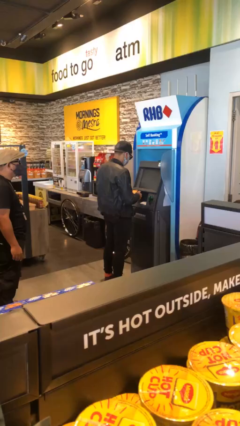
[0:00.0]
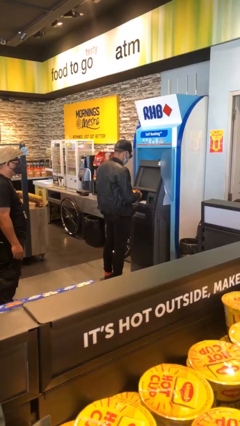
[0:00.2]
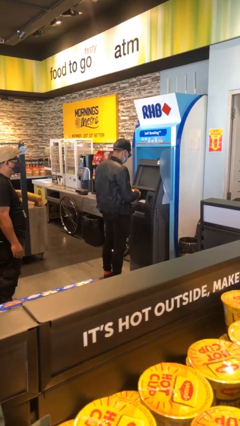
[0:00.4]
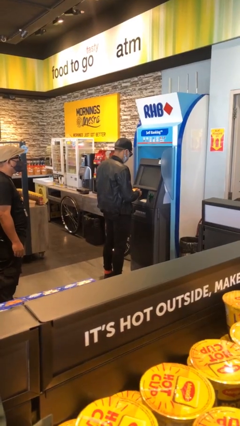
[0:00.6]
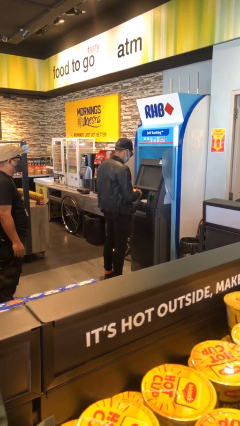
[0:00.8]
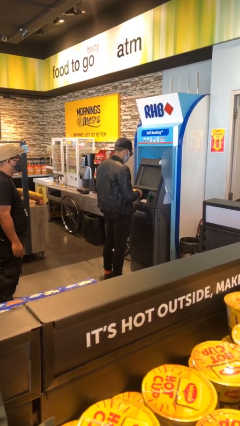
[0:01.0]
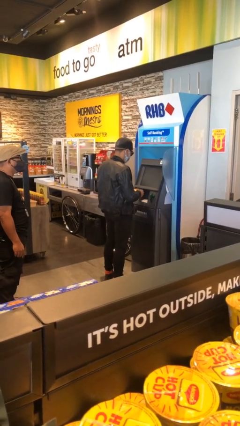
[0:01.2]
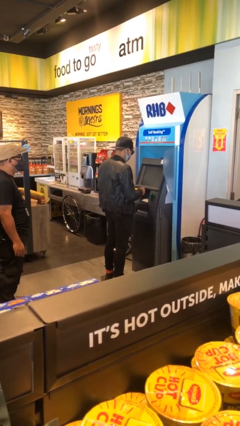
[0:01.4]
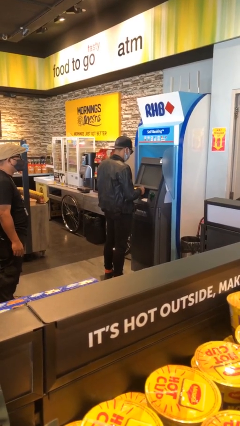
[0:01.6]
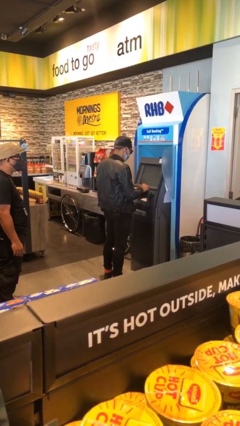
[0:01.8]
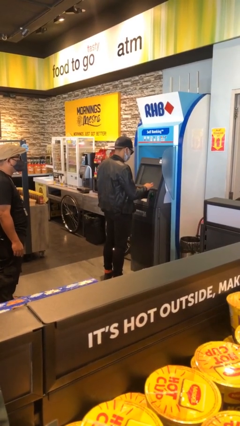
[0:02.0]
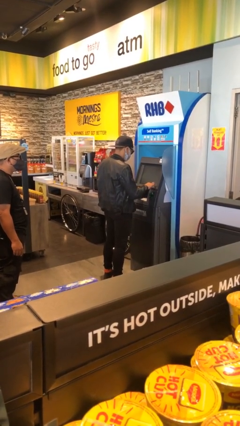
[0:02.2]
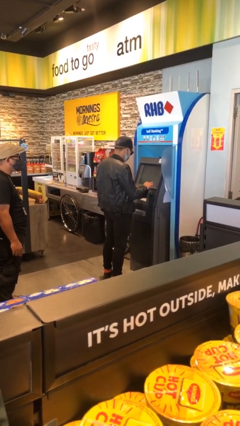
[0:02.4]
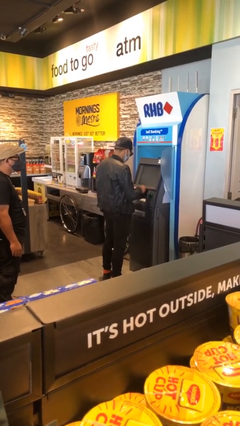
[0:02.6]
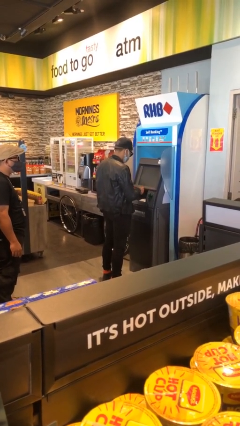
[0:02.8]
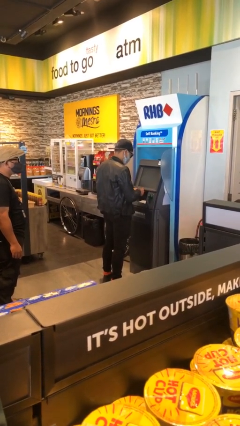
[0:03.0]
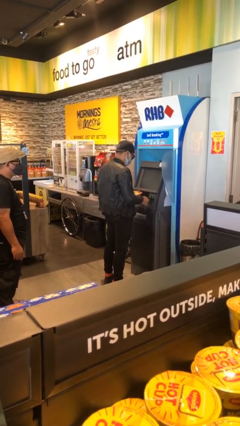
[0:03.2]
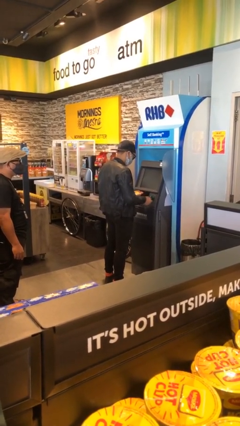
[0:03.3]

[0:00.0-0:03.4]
person purchases from machine

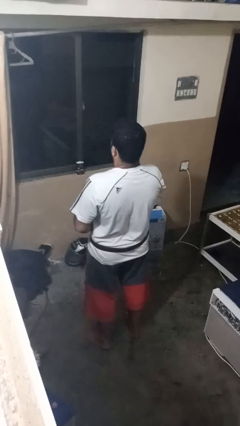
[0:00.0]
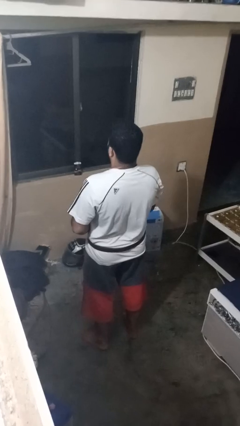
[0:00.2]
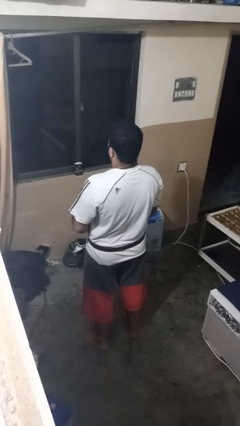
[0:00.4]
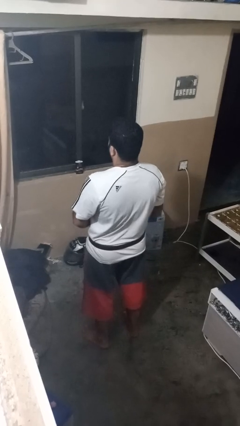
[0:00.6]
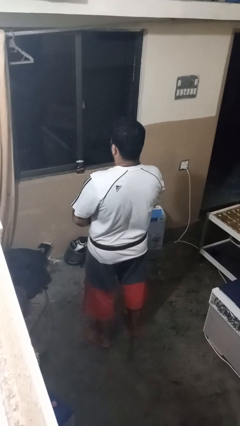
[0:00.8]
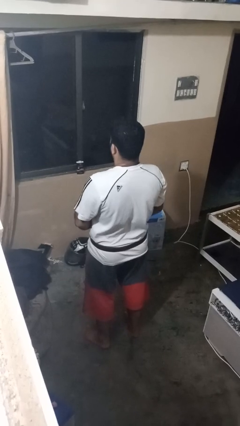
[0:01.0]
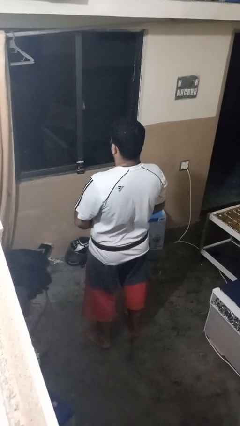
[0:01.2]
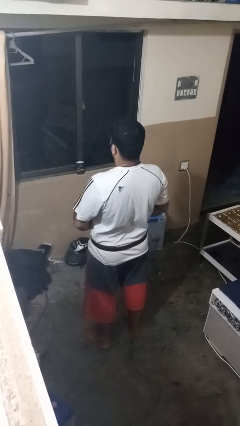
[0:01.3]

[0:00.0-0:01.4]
person takes off belt

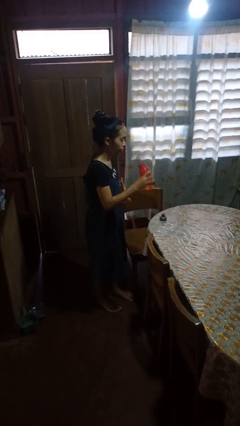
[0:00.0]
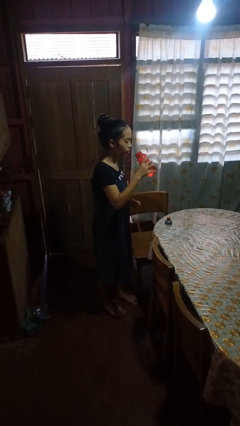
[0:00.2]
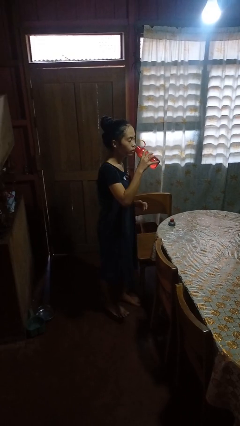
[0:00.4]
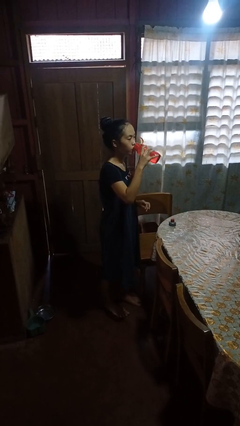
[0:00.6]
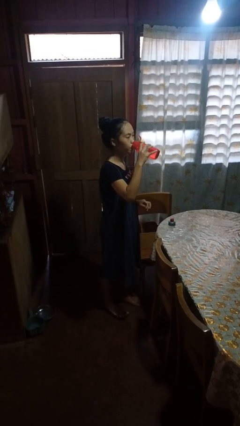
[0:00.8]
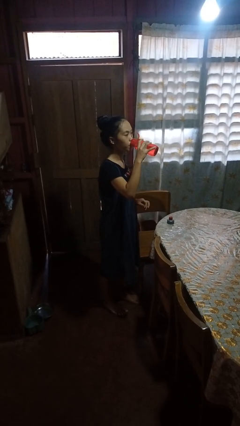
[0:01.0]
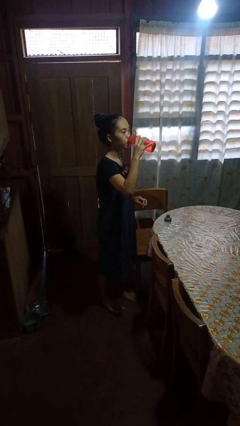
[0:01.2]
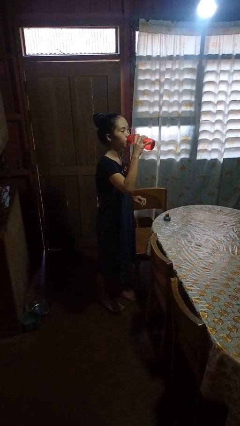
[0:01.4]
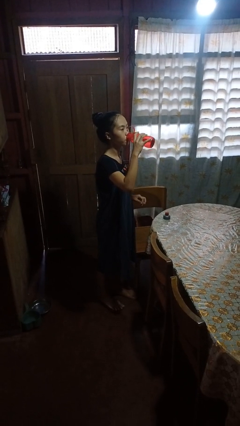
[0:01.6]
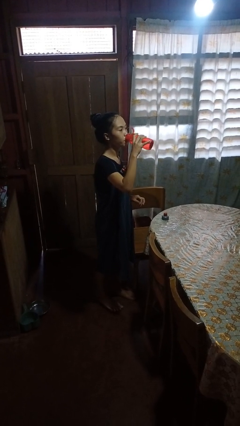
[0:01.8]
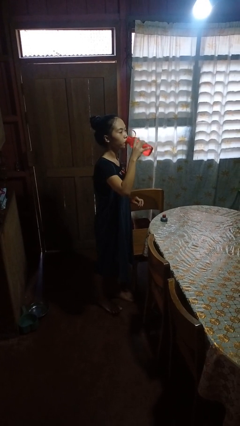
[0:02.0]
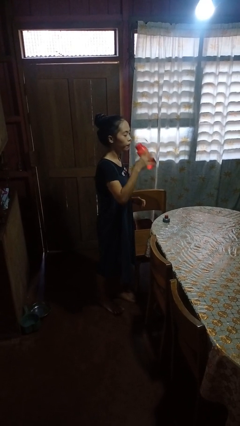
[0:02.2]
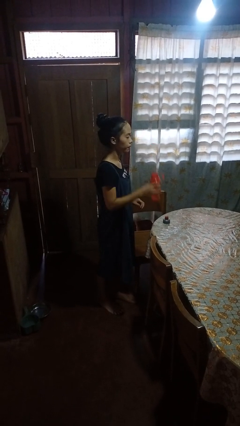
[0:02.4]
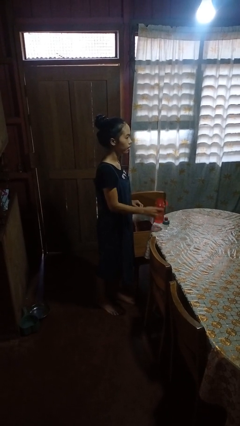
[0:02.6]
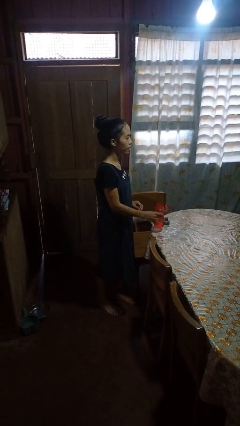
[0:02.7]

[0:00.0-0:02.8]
person drinks from bottle

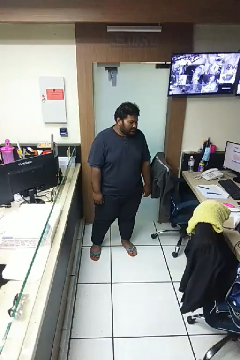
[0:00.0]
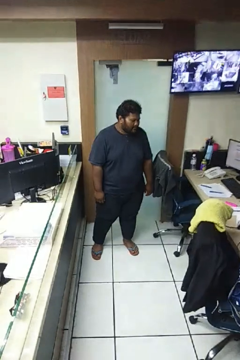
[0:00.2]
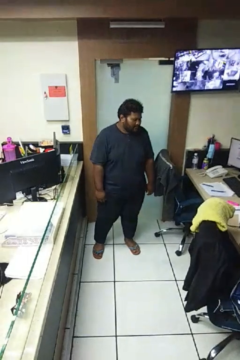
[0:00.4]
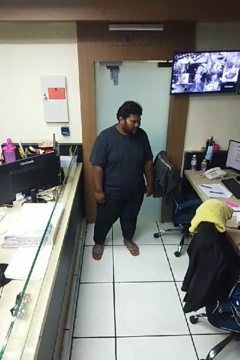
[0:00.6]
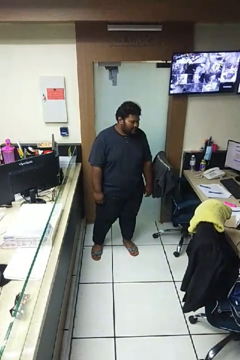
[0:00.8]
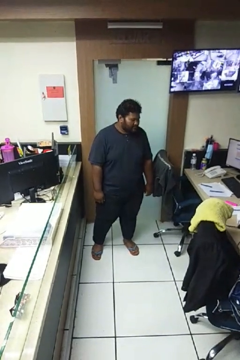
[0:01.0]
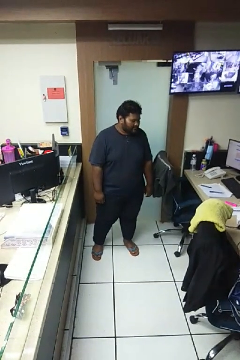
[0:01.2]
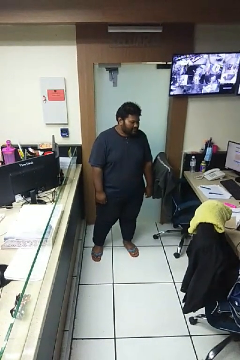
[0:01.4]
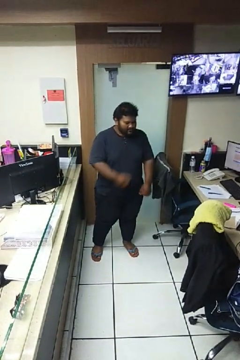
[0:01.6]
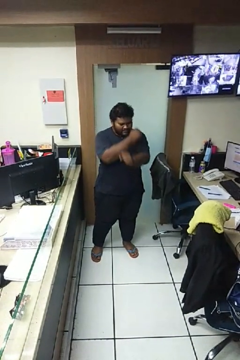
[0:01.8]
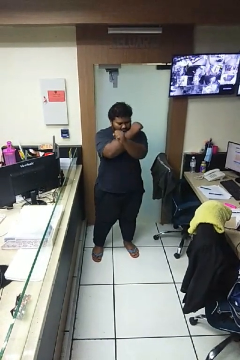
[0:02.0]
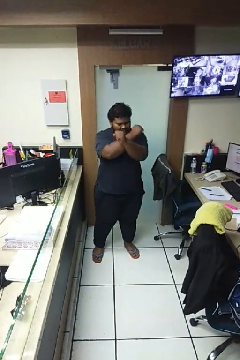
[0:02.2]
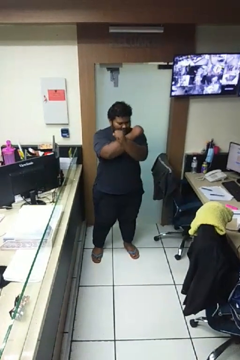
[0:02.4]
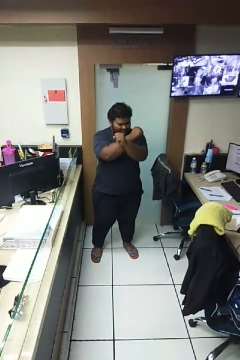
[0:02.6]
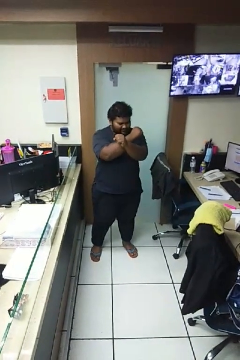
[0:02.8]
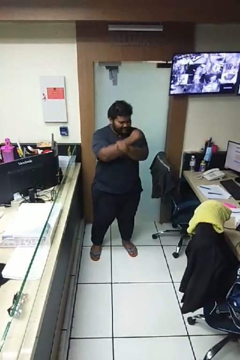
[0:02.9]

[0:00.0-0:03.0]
person gestures arms x

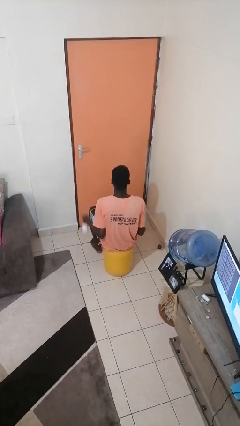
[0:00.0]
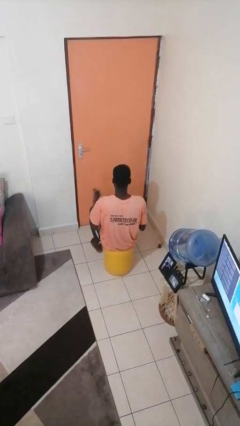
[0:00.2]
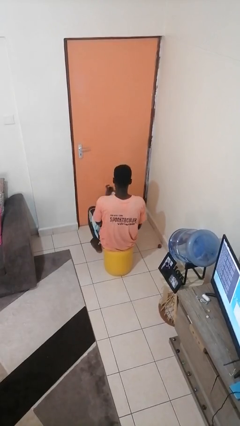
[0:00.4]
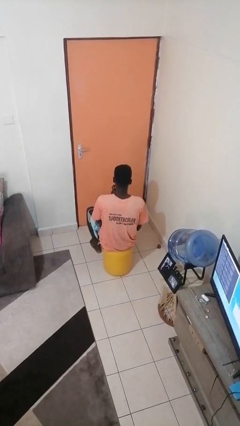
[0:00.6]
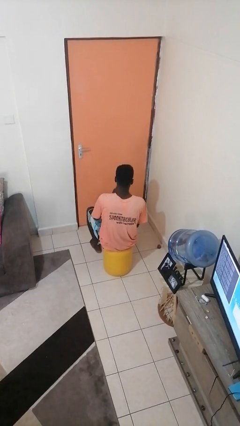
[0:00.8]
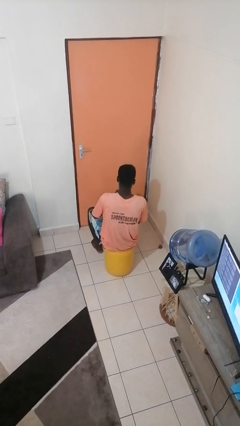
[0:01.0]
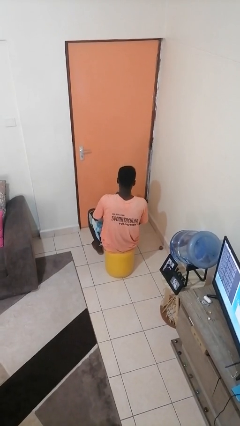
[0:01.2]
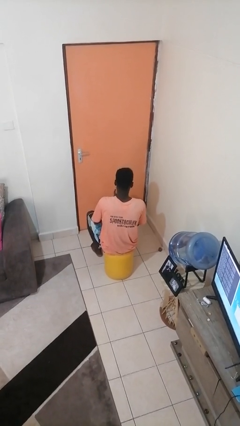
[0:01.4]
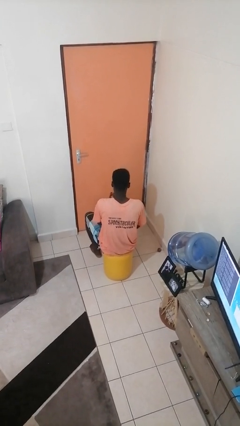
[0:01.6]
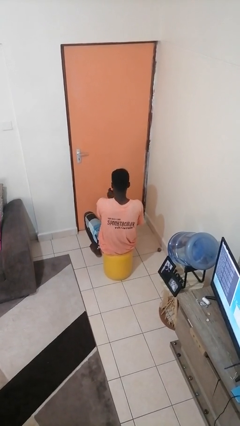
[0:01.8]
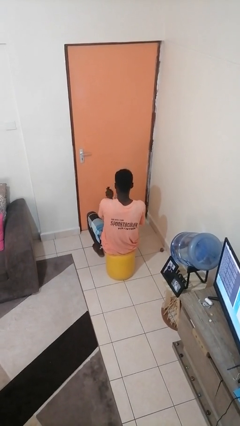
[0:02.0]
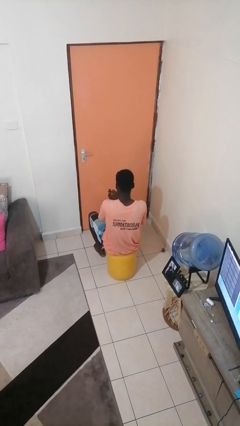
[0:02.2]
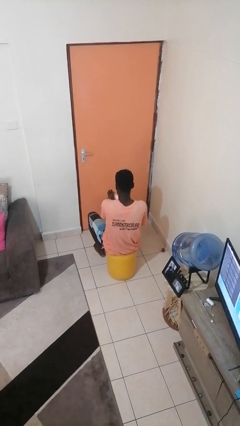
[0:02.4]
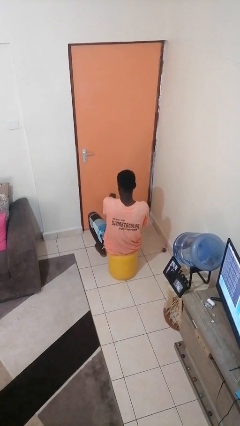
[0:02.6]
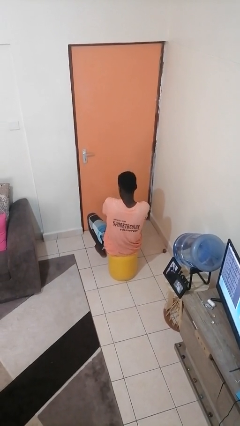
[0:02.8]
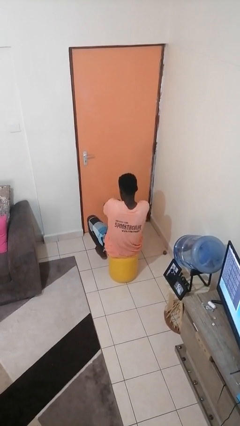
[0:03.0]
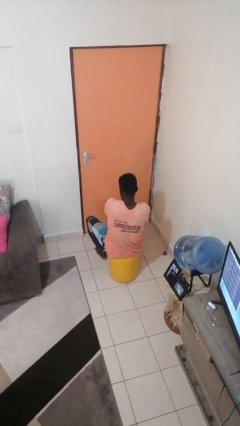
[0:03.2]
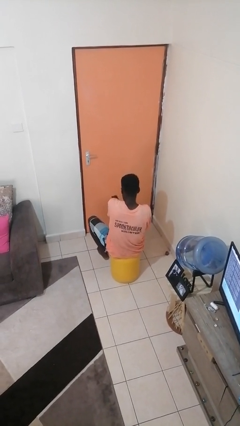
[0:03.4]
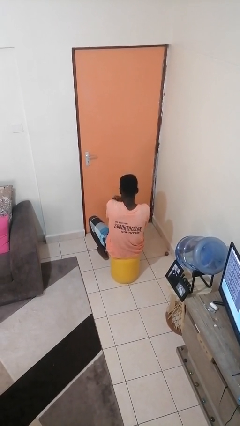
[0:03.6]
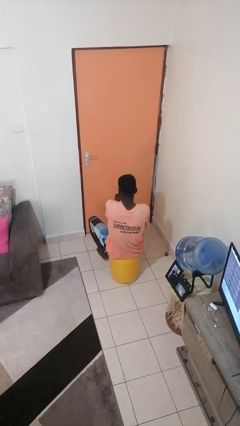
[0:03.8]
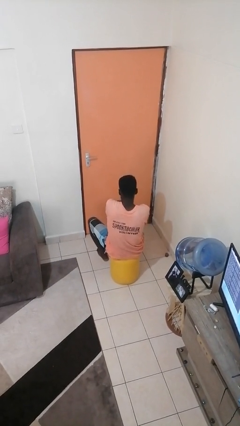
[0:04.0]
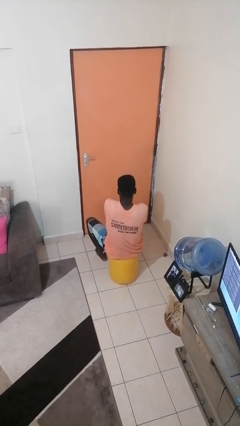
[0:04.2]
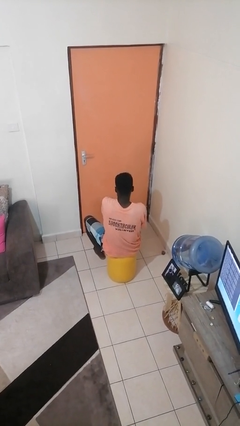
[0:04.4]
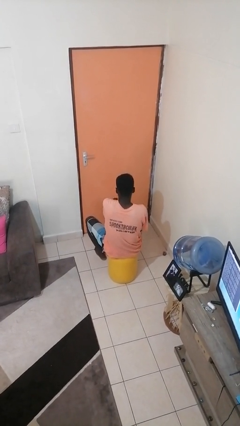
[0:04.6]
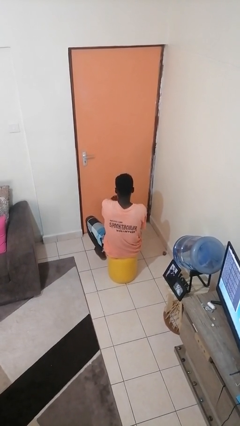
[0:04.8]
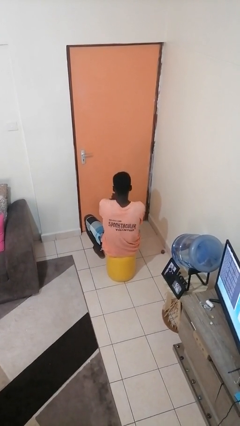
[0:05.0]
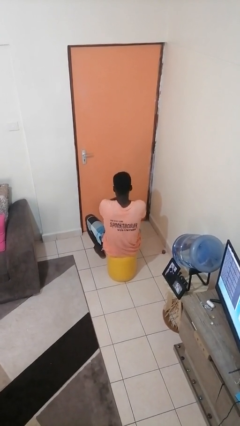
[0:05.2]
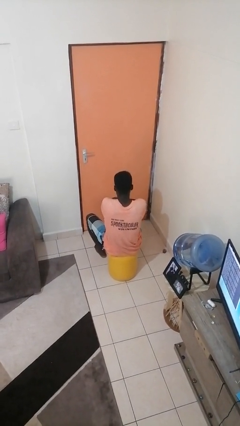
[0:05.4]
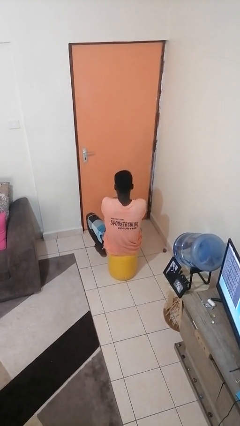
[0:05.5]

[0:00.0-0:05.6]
person applies sunscreen

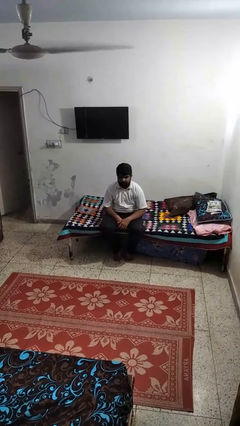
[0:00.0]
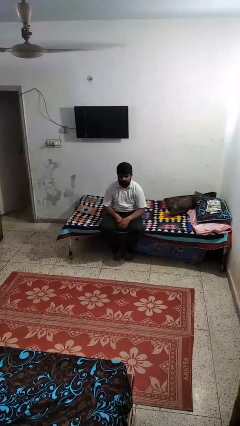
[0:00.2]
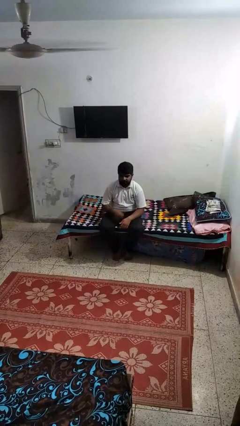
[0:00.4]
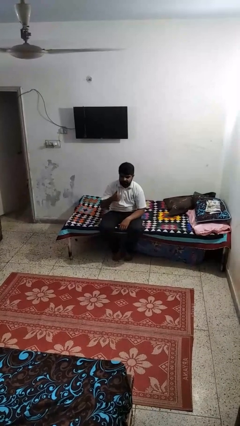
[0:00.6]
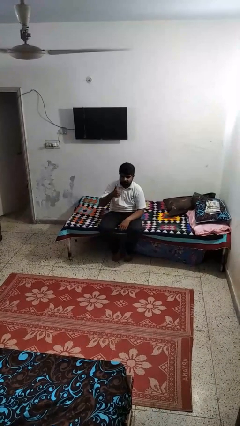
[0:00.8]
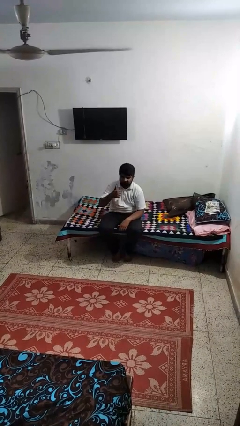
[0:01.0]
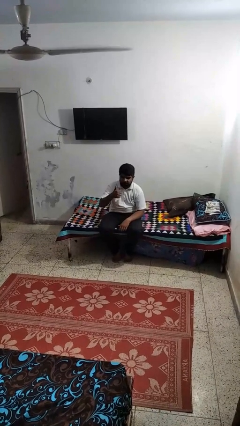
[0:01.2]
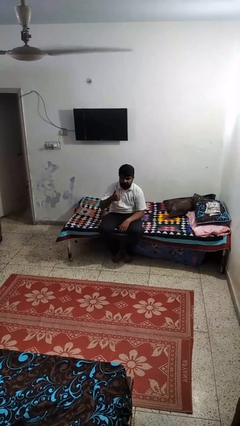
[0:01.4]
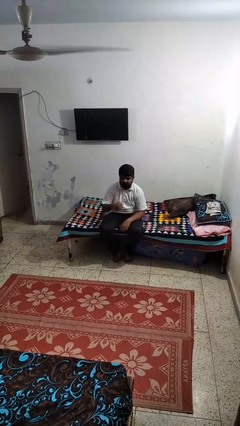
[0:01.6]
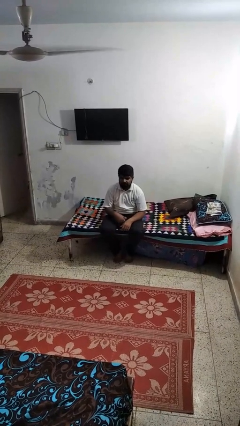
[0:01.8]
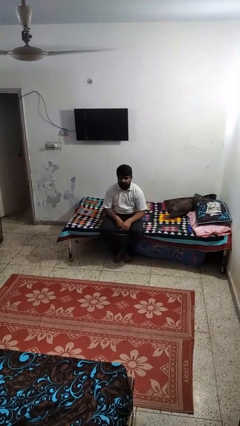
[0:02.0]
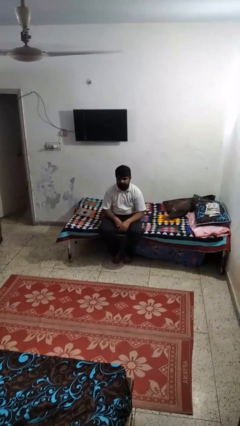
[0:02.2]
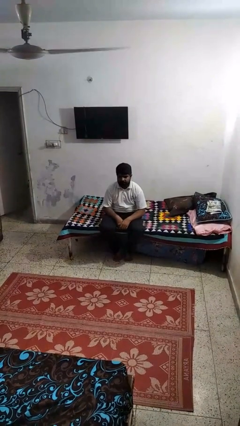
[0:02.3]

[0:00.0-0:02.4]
person gestures thumbs up
